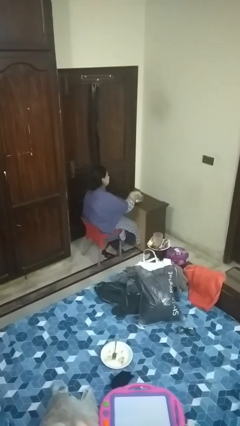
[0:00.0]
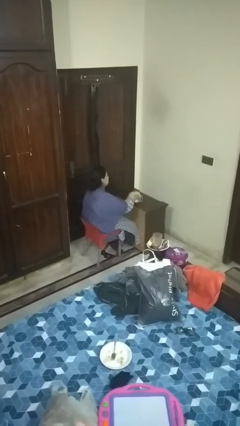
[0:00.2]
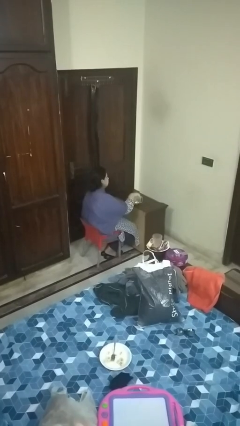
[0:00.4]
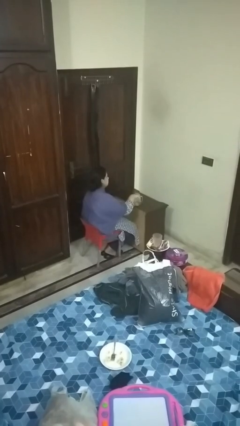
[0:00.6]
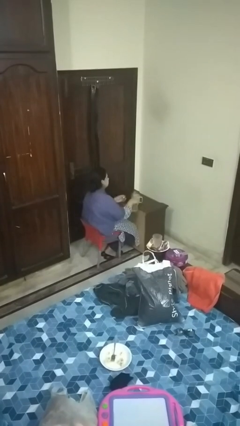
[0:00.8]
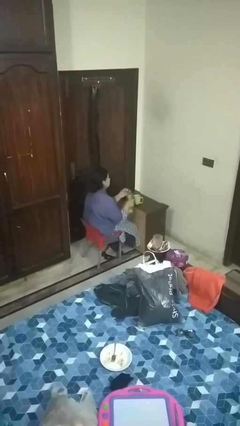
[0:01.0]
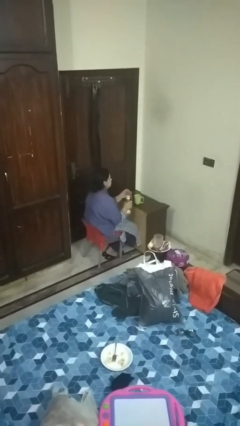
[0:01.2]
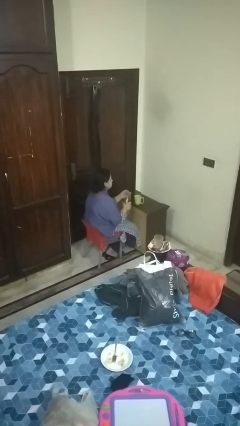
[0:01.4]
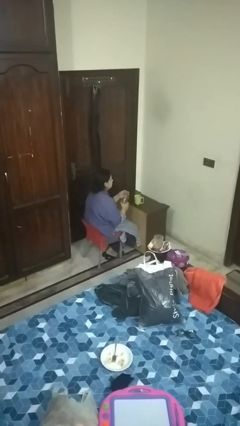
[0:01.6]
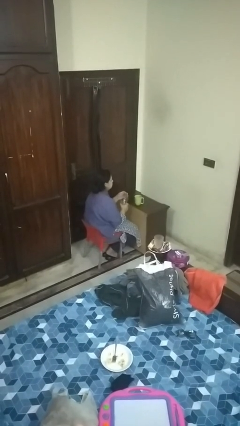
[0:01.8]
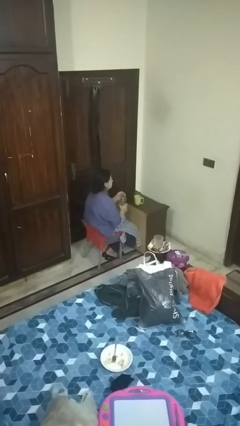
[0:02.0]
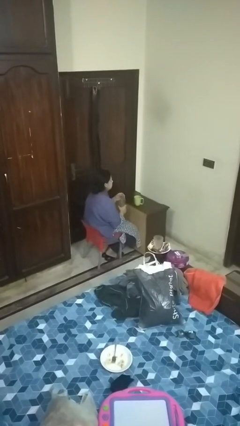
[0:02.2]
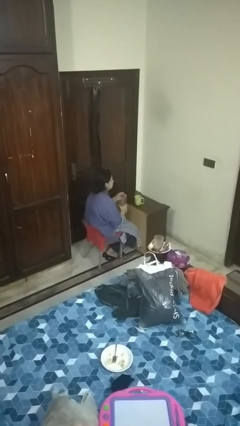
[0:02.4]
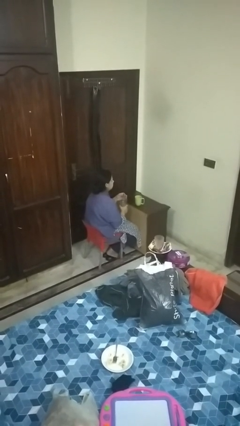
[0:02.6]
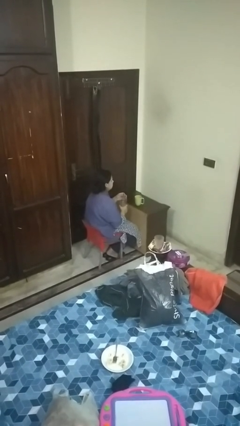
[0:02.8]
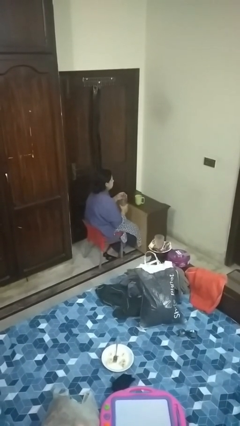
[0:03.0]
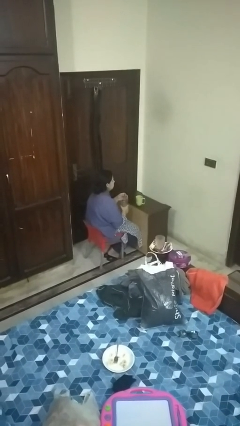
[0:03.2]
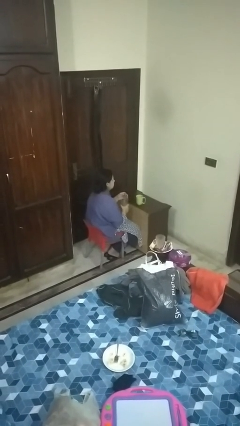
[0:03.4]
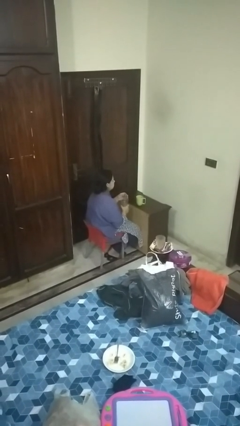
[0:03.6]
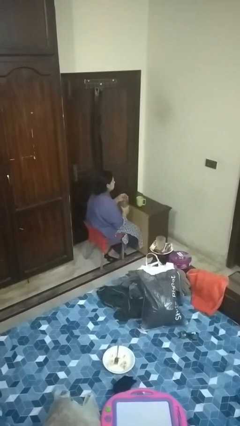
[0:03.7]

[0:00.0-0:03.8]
person screws lid to bottle

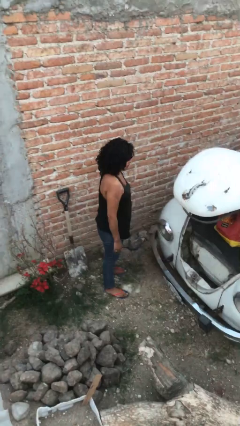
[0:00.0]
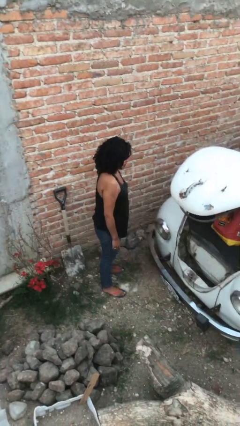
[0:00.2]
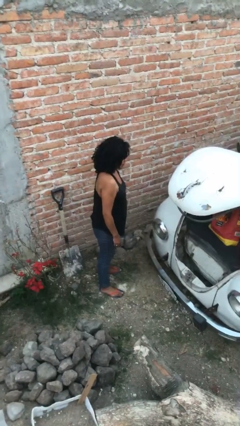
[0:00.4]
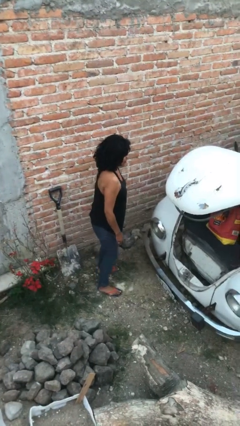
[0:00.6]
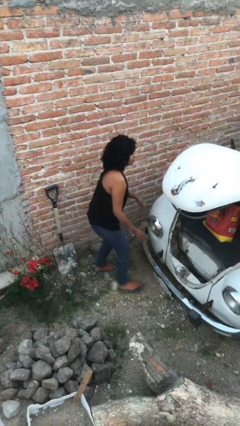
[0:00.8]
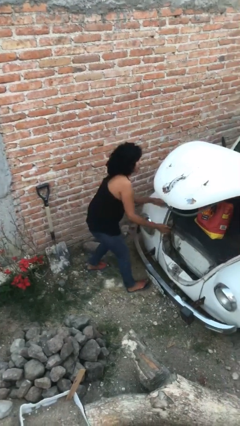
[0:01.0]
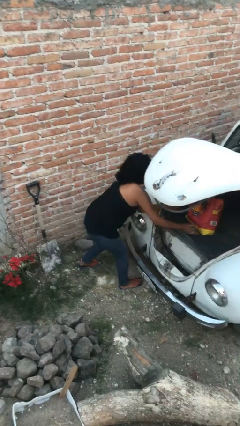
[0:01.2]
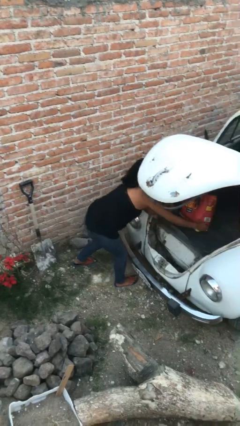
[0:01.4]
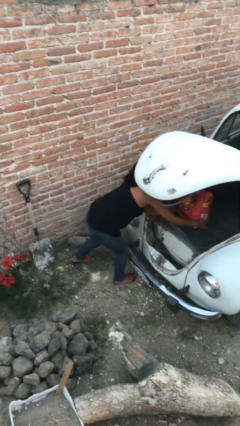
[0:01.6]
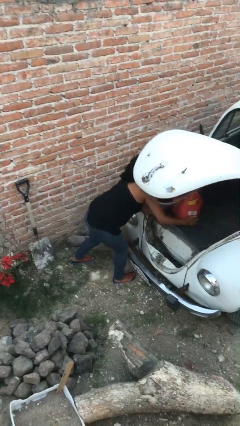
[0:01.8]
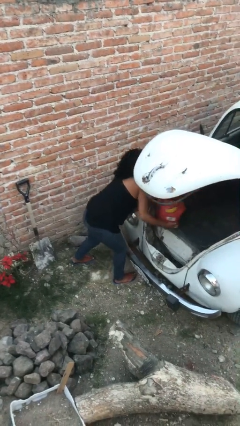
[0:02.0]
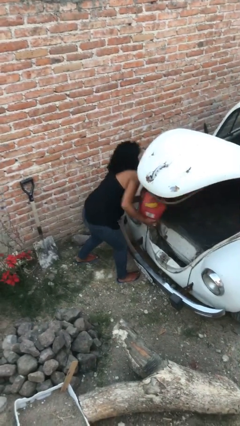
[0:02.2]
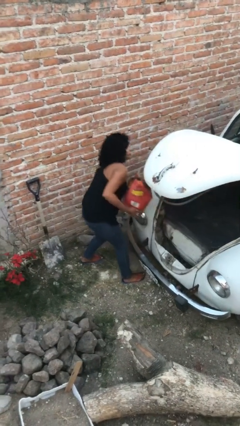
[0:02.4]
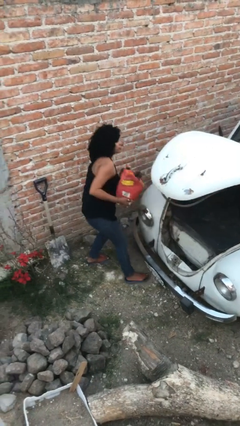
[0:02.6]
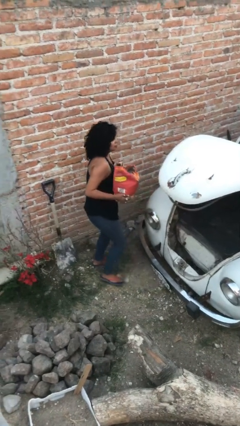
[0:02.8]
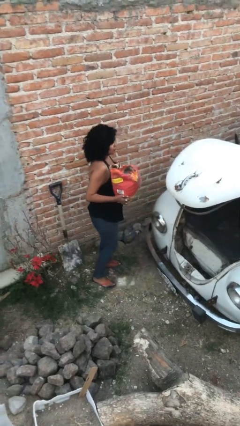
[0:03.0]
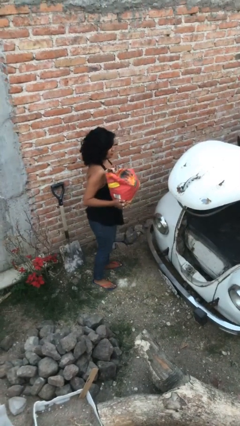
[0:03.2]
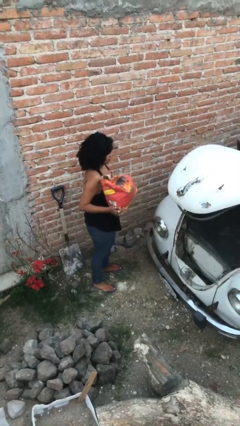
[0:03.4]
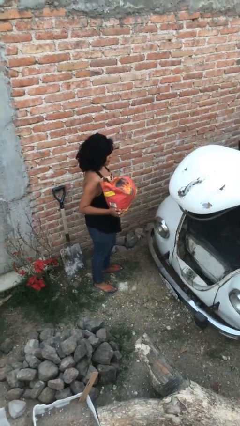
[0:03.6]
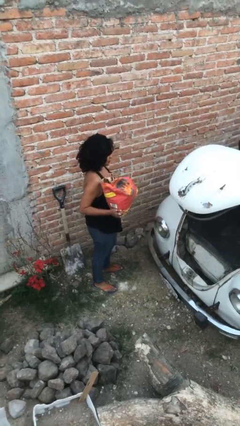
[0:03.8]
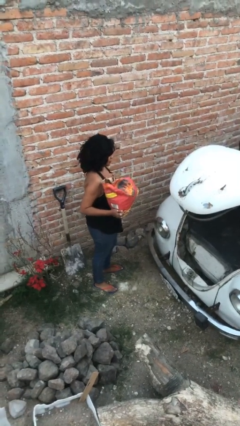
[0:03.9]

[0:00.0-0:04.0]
person unloads car

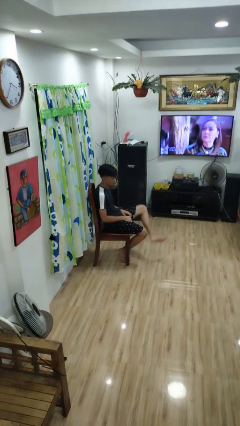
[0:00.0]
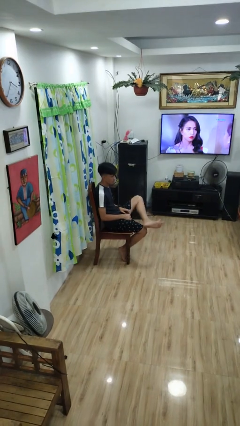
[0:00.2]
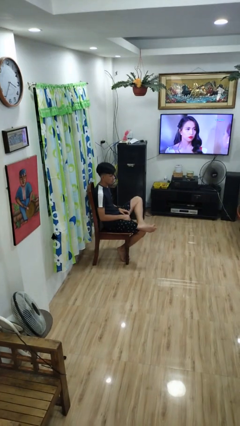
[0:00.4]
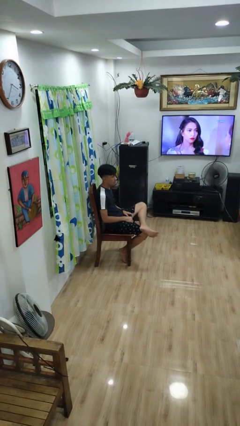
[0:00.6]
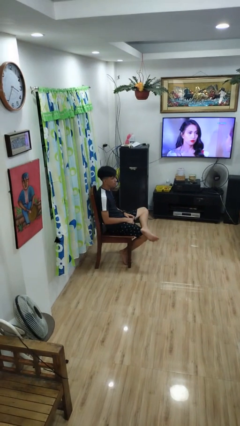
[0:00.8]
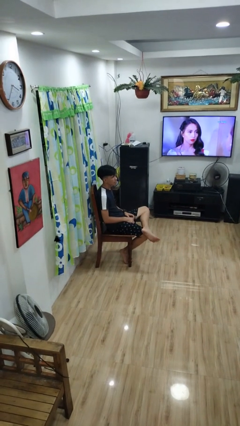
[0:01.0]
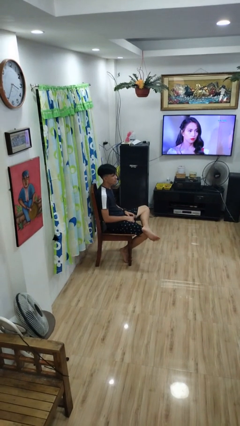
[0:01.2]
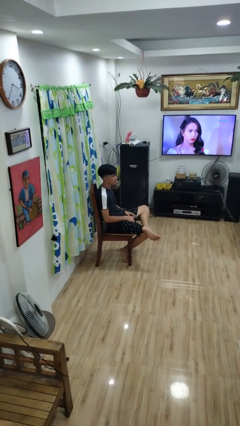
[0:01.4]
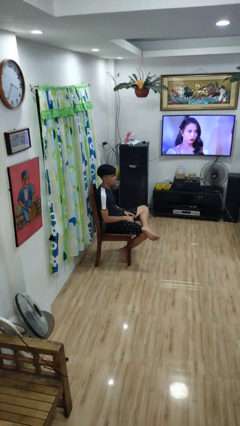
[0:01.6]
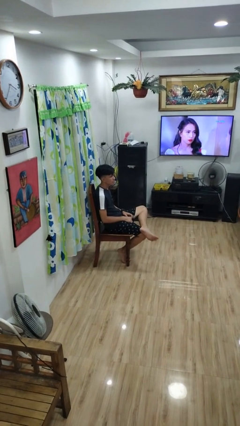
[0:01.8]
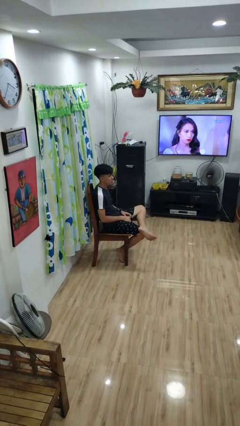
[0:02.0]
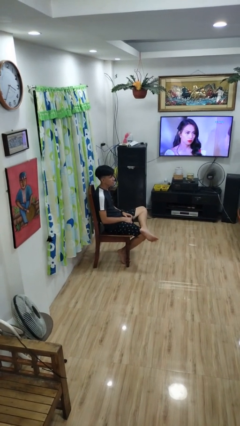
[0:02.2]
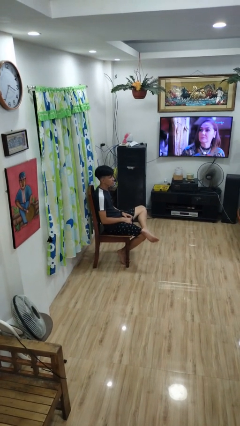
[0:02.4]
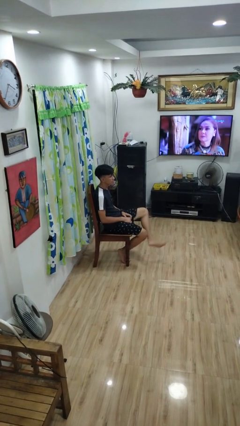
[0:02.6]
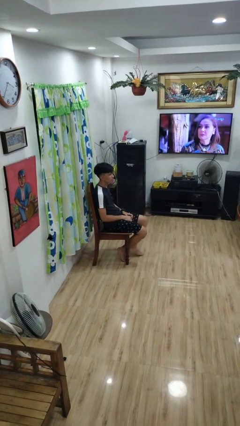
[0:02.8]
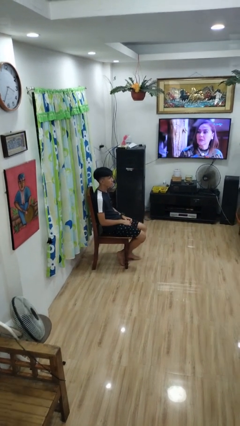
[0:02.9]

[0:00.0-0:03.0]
person crosses legs

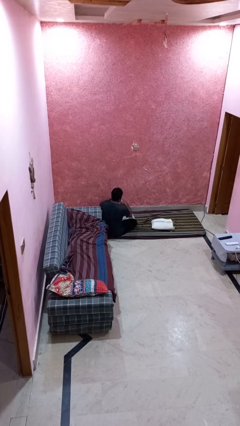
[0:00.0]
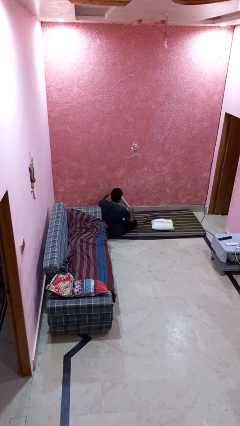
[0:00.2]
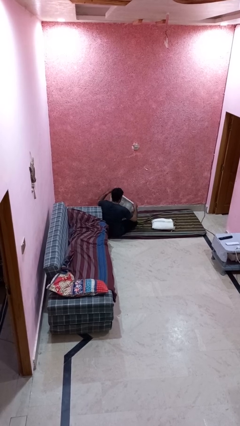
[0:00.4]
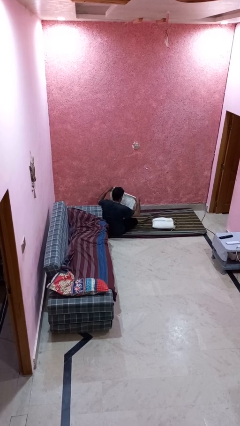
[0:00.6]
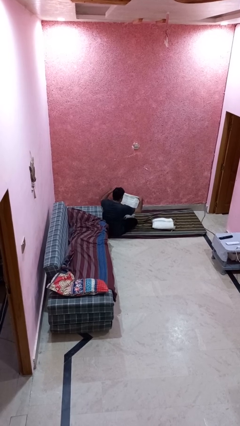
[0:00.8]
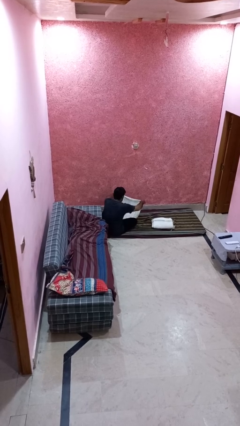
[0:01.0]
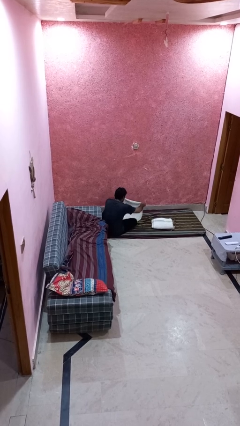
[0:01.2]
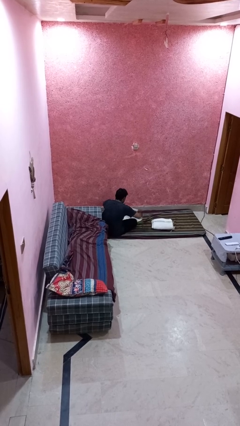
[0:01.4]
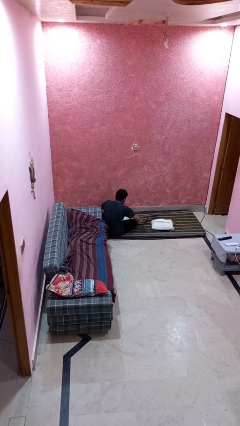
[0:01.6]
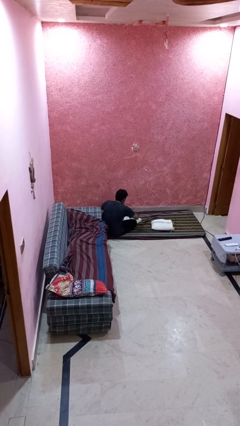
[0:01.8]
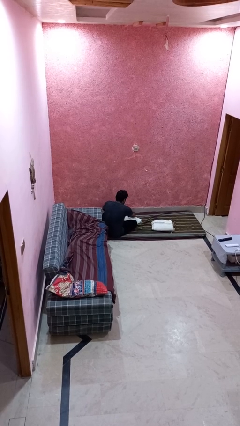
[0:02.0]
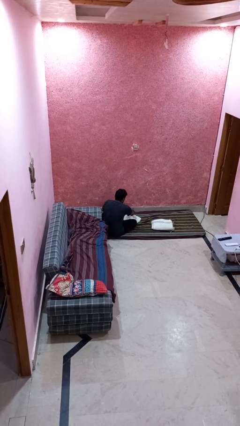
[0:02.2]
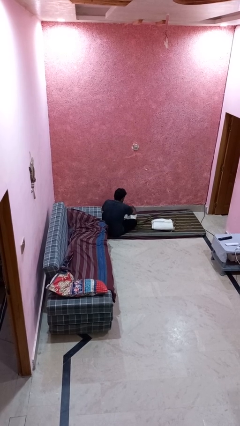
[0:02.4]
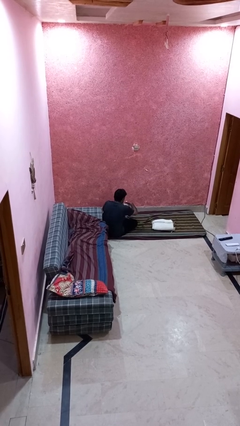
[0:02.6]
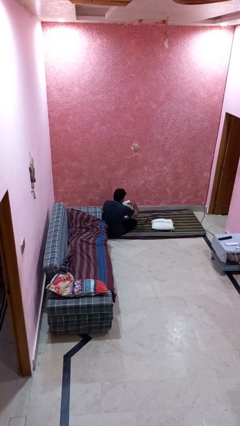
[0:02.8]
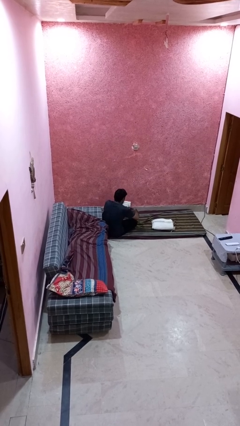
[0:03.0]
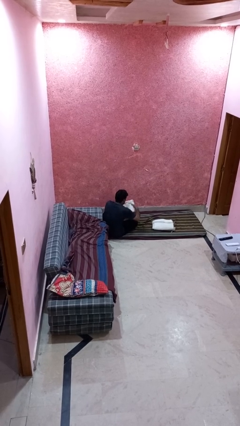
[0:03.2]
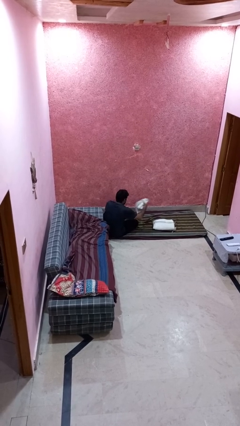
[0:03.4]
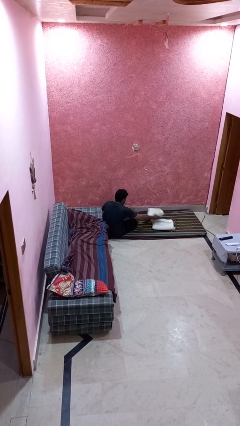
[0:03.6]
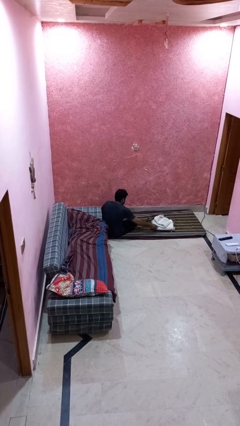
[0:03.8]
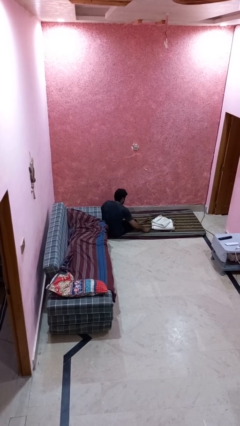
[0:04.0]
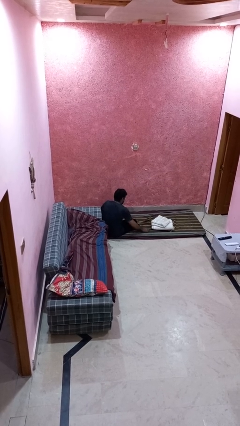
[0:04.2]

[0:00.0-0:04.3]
person folds towel

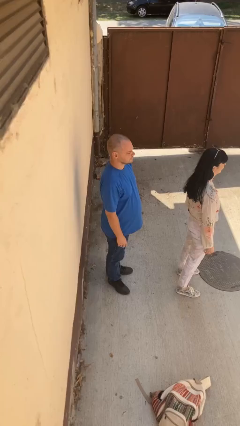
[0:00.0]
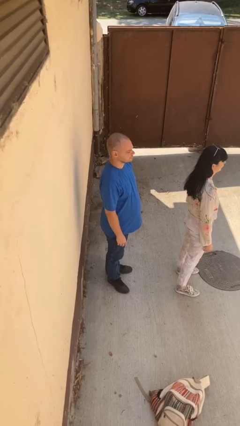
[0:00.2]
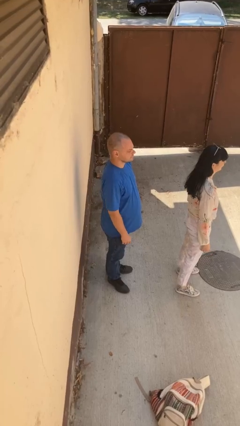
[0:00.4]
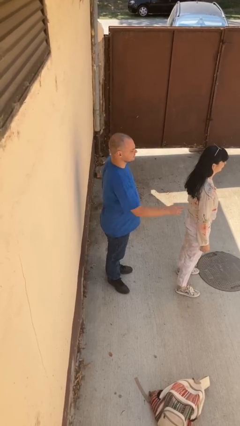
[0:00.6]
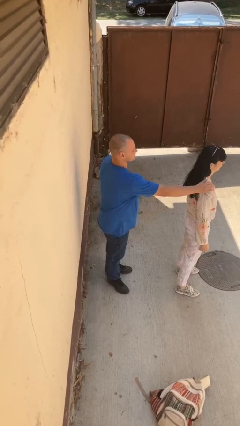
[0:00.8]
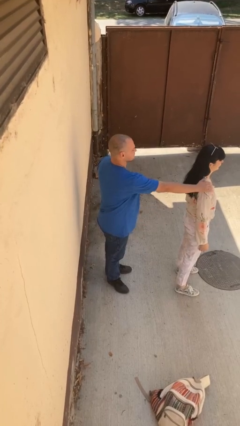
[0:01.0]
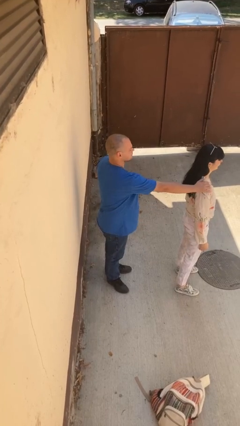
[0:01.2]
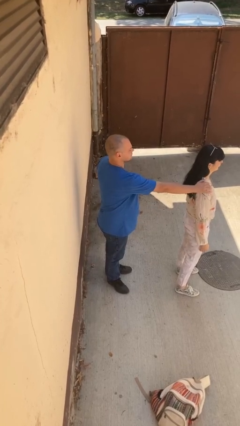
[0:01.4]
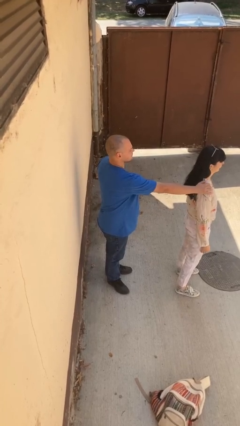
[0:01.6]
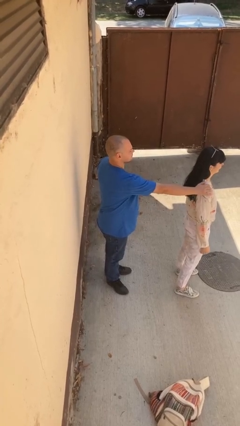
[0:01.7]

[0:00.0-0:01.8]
person grabs person by shoulder

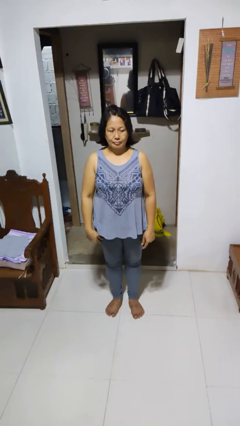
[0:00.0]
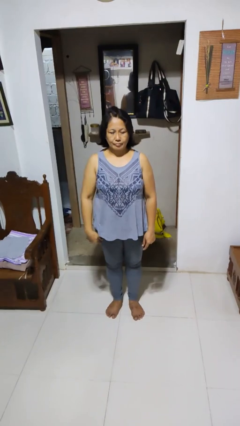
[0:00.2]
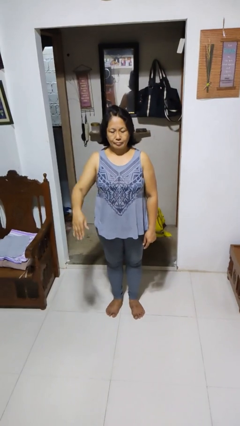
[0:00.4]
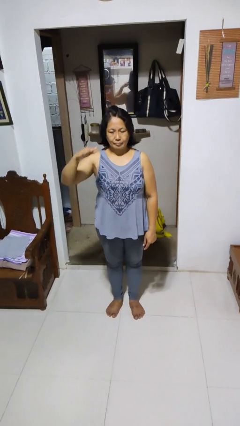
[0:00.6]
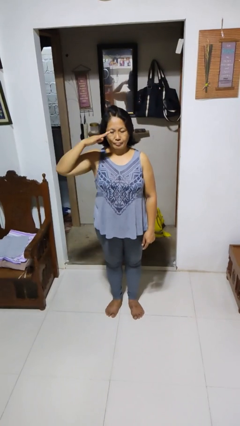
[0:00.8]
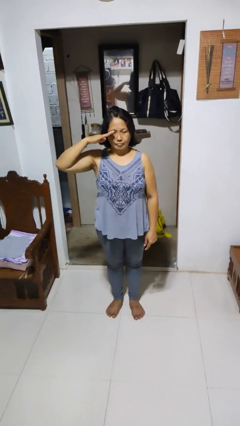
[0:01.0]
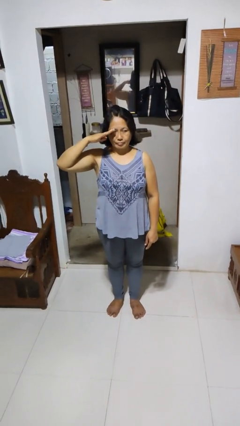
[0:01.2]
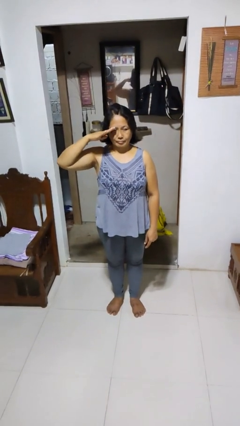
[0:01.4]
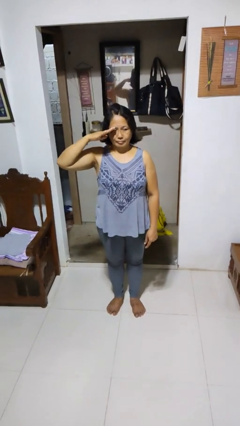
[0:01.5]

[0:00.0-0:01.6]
person salutes
